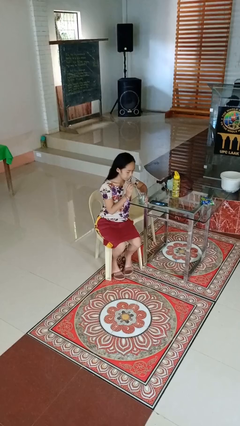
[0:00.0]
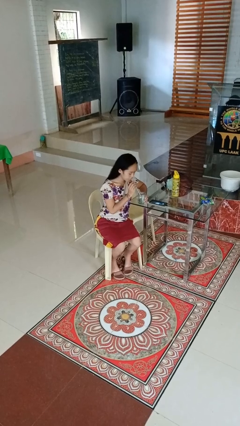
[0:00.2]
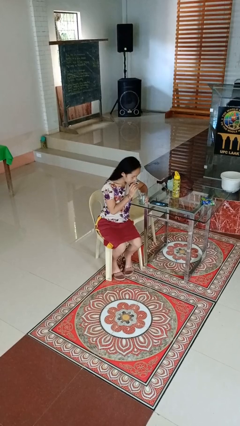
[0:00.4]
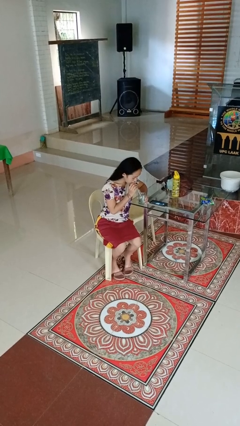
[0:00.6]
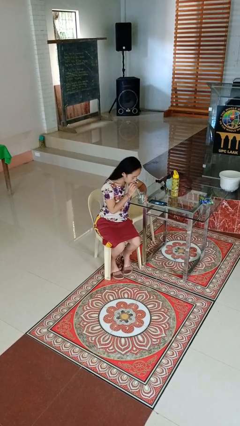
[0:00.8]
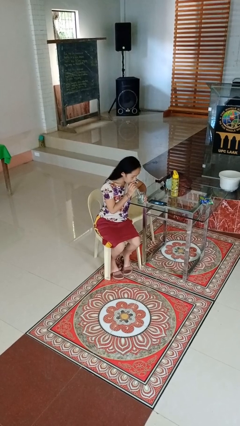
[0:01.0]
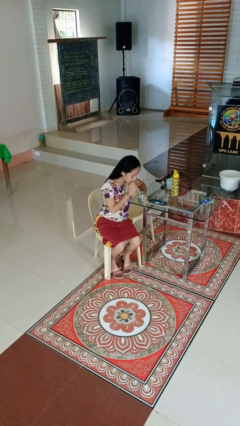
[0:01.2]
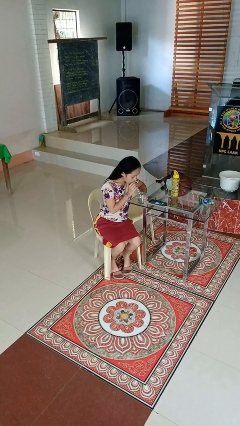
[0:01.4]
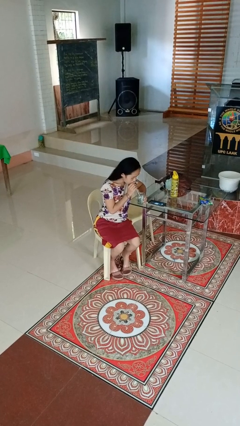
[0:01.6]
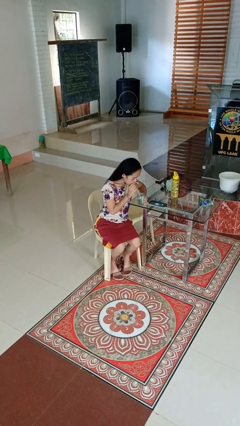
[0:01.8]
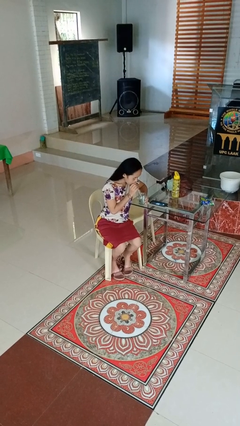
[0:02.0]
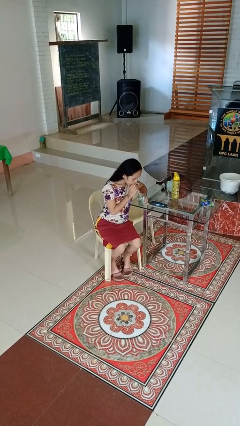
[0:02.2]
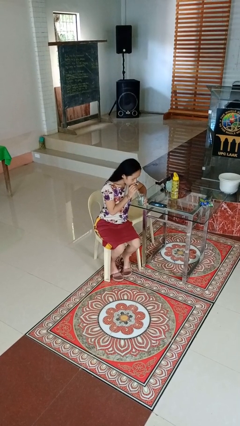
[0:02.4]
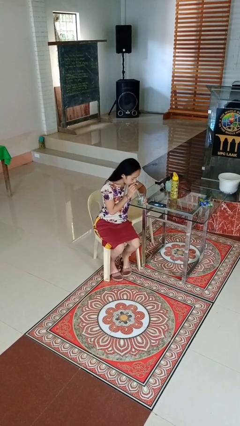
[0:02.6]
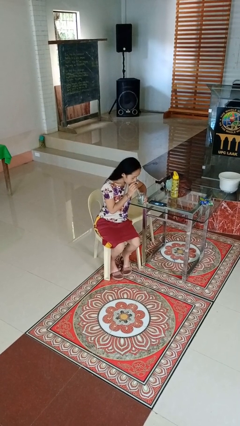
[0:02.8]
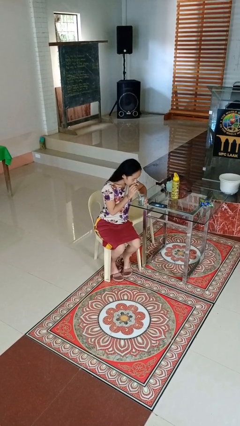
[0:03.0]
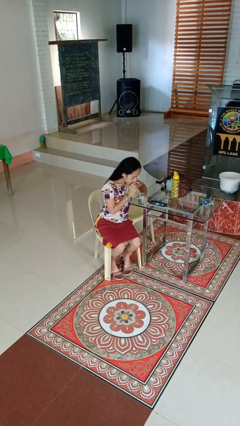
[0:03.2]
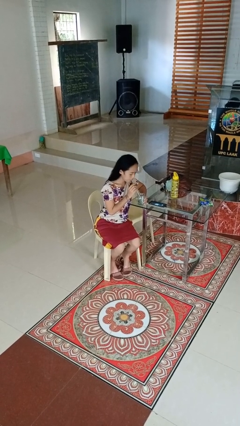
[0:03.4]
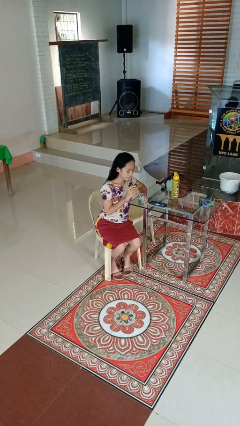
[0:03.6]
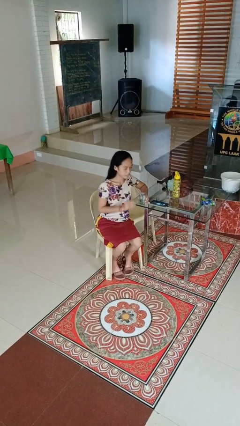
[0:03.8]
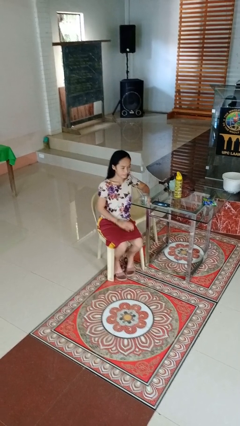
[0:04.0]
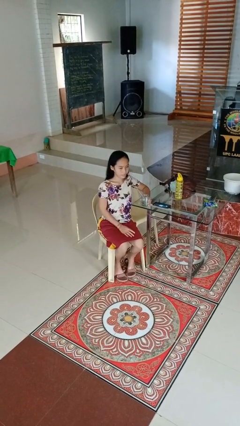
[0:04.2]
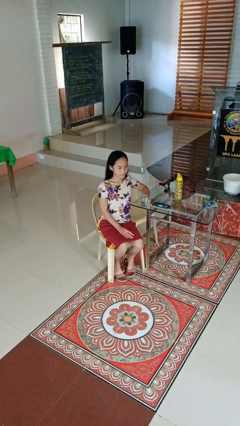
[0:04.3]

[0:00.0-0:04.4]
person drinks from straw

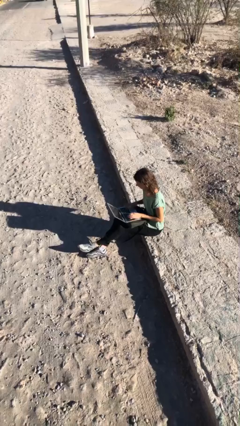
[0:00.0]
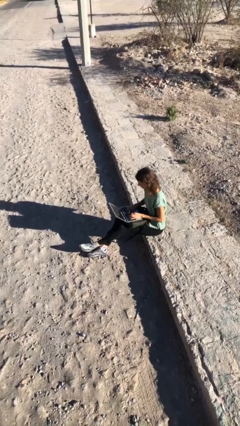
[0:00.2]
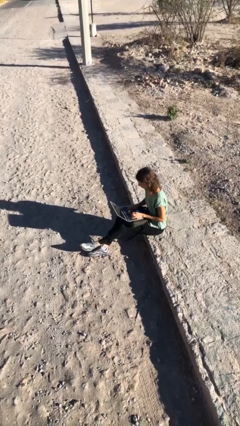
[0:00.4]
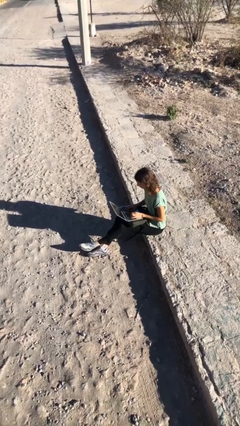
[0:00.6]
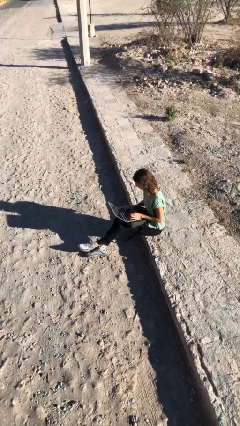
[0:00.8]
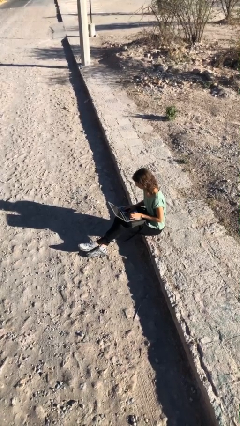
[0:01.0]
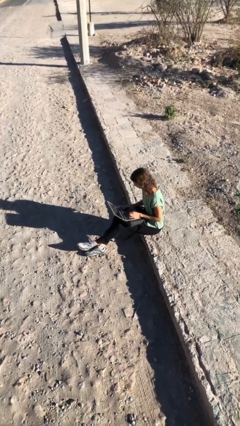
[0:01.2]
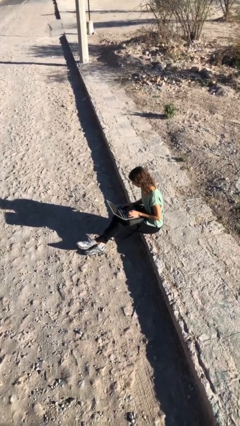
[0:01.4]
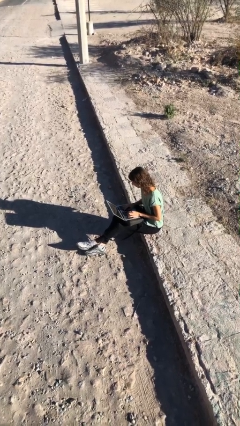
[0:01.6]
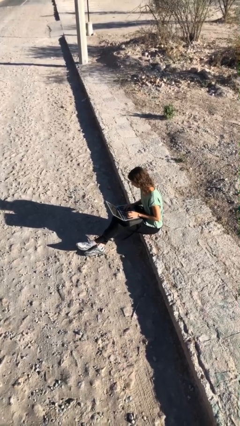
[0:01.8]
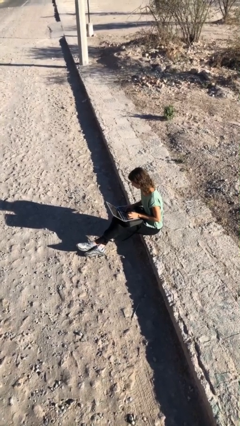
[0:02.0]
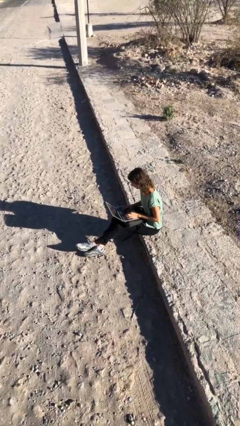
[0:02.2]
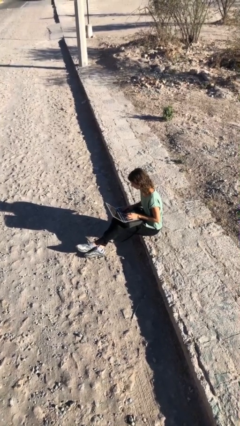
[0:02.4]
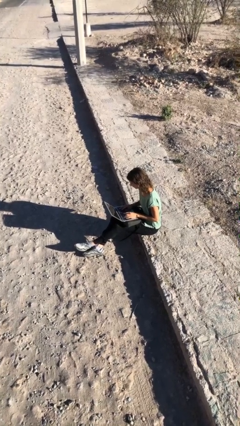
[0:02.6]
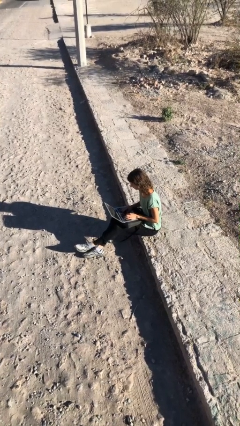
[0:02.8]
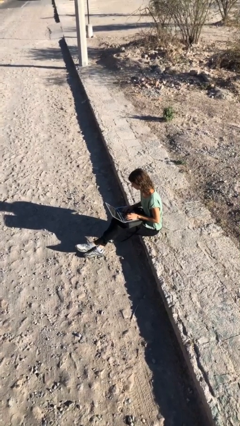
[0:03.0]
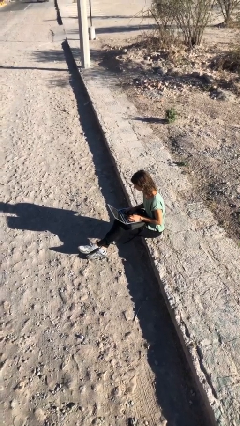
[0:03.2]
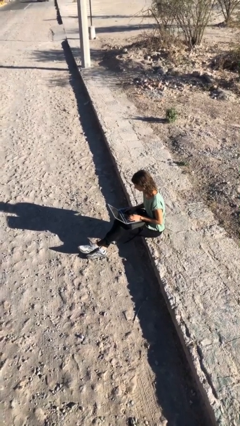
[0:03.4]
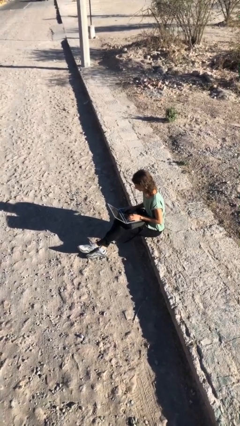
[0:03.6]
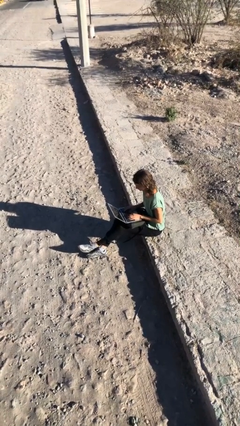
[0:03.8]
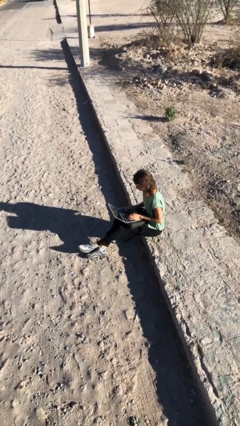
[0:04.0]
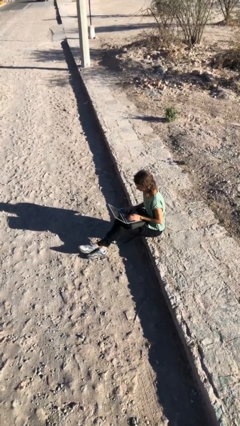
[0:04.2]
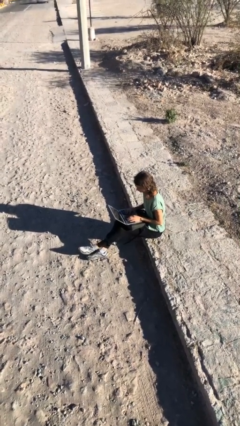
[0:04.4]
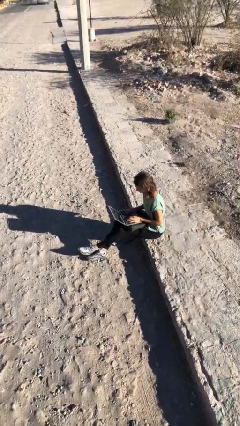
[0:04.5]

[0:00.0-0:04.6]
person interacts with laptop

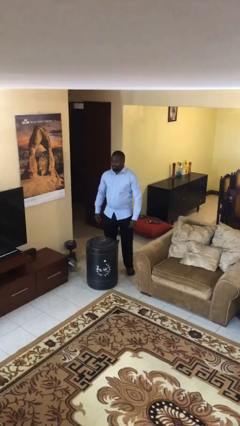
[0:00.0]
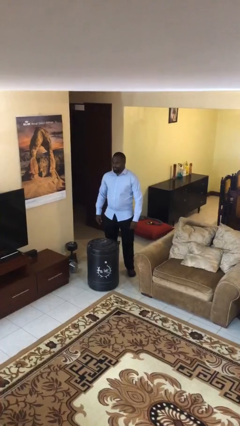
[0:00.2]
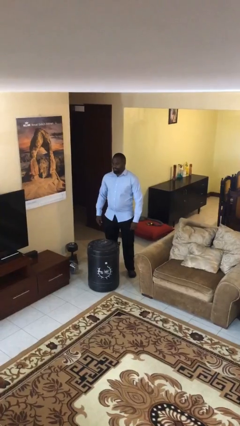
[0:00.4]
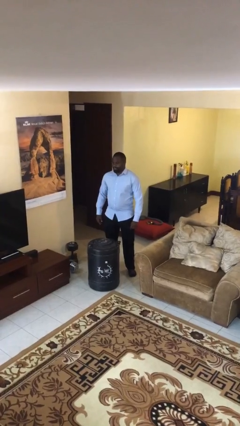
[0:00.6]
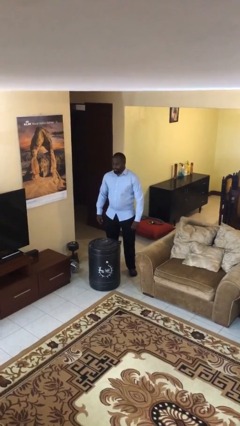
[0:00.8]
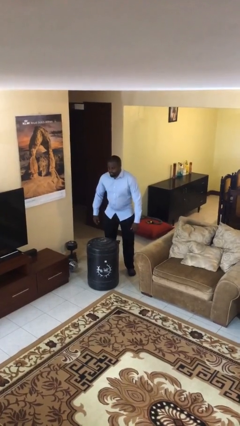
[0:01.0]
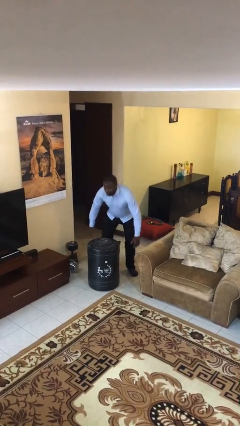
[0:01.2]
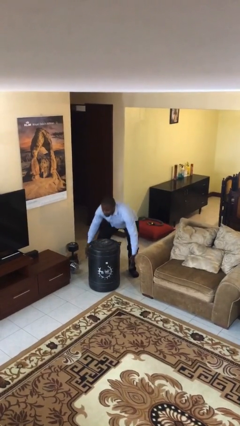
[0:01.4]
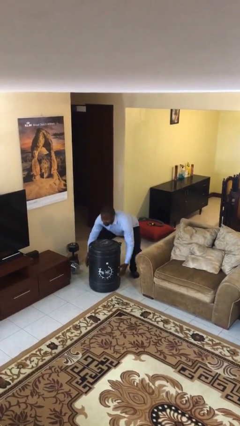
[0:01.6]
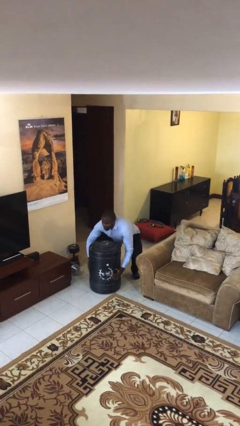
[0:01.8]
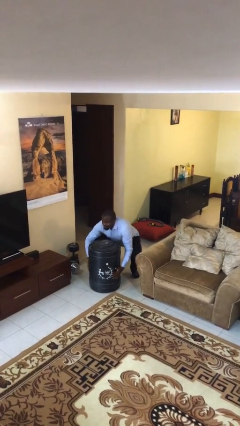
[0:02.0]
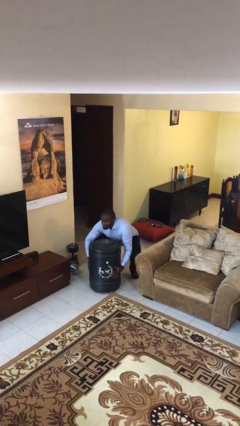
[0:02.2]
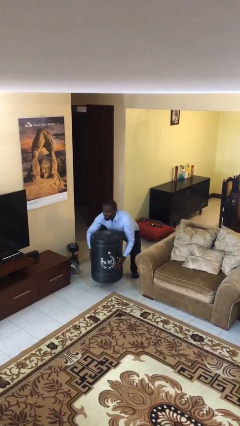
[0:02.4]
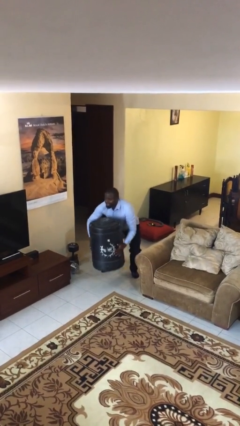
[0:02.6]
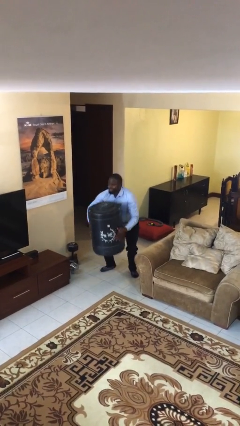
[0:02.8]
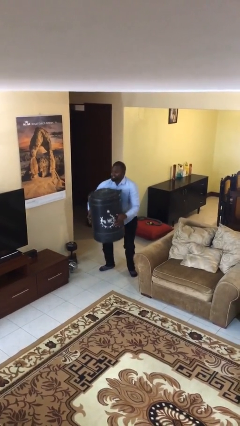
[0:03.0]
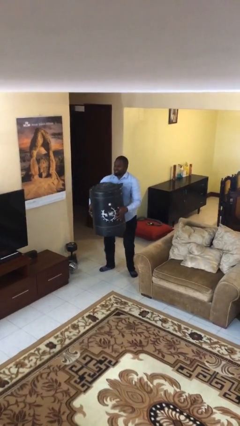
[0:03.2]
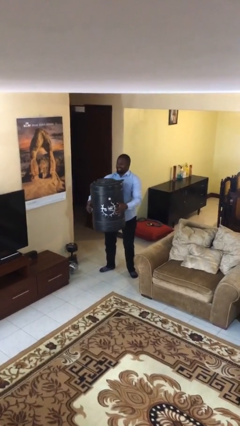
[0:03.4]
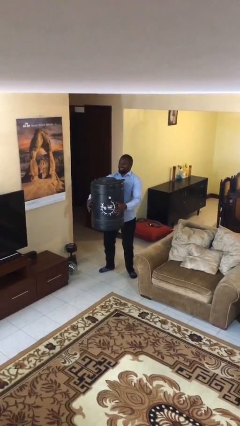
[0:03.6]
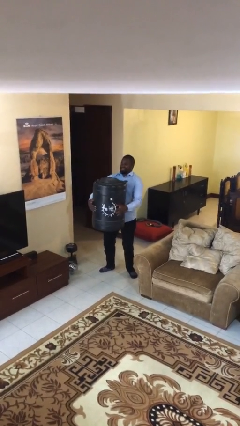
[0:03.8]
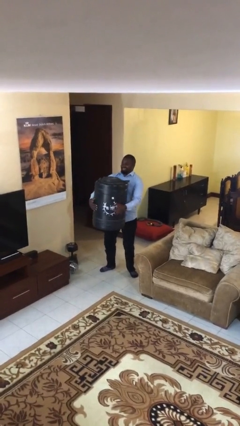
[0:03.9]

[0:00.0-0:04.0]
person picks up object from floor

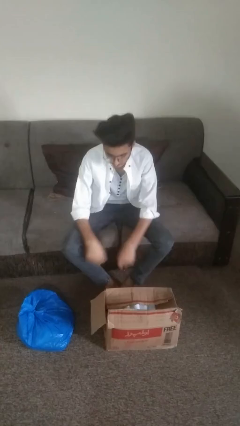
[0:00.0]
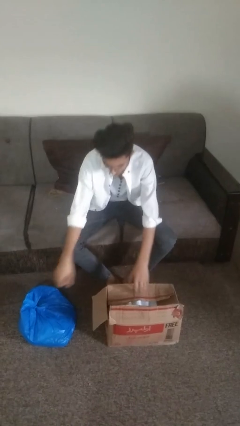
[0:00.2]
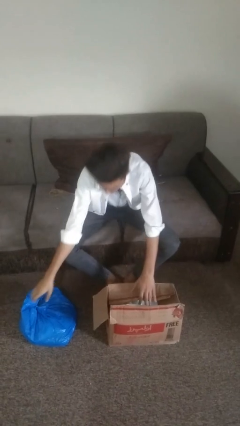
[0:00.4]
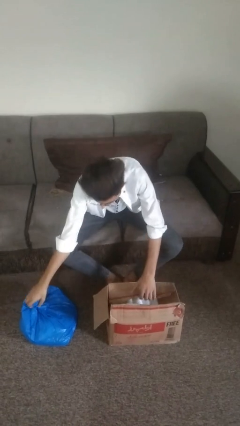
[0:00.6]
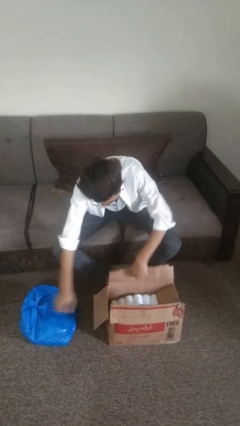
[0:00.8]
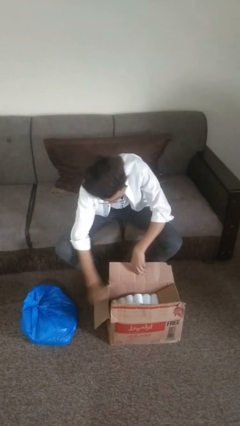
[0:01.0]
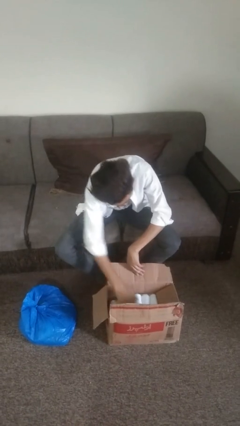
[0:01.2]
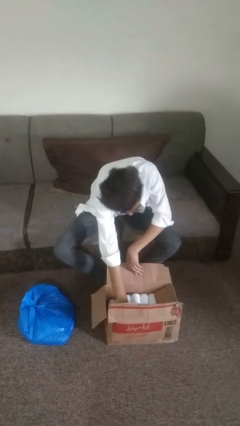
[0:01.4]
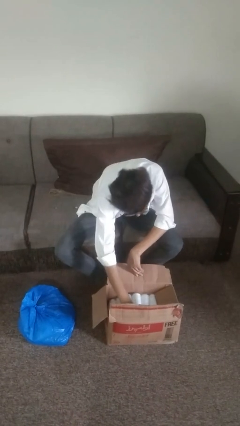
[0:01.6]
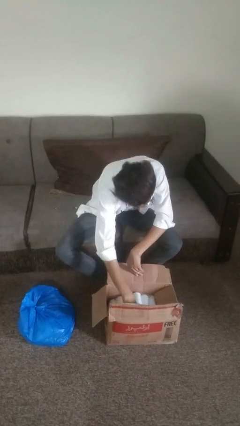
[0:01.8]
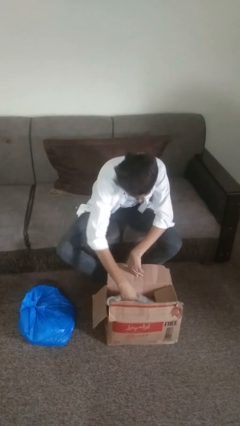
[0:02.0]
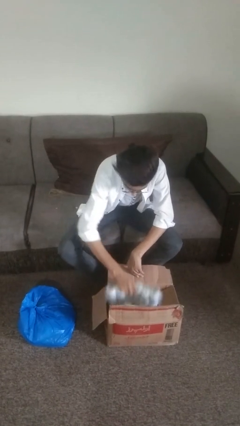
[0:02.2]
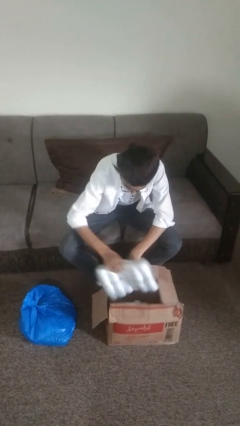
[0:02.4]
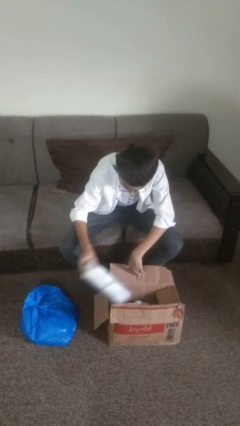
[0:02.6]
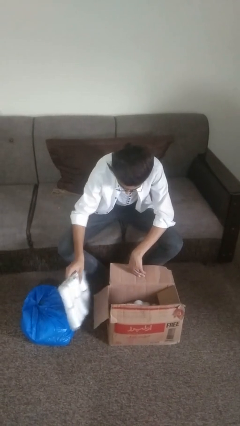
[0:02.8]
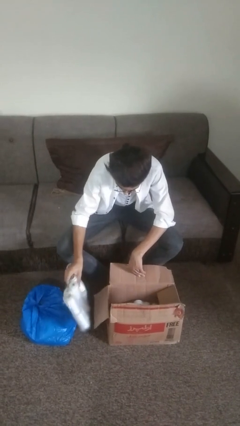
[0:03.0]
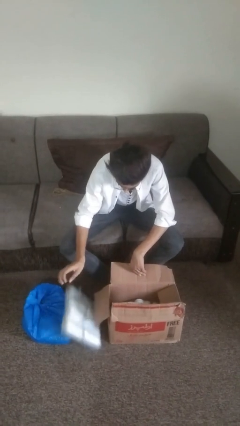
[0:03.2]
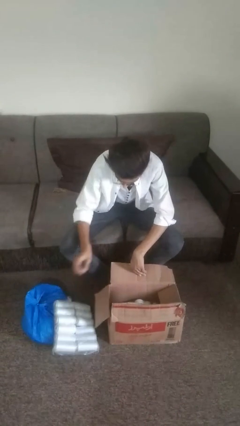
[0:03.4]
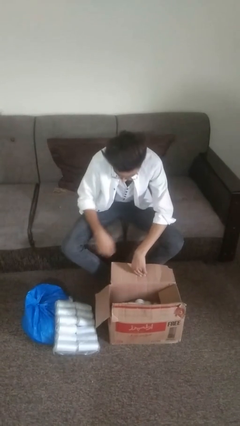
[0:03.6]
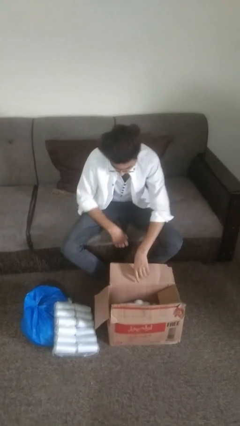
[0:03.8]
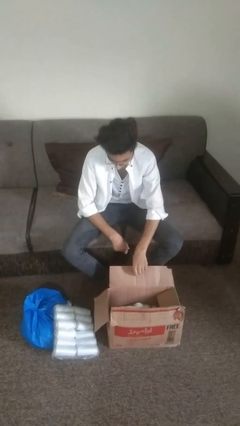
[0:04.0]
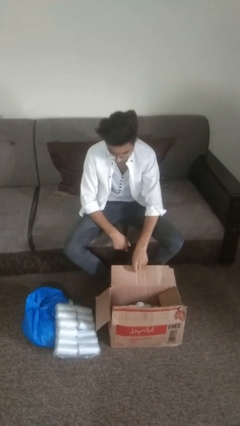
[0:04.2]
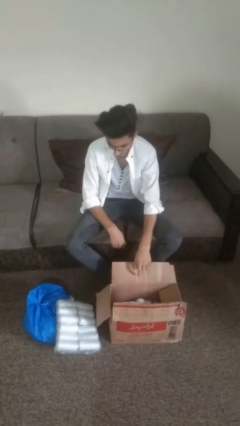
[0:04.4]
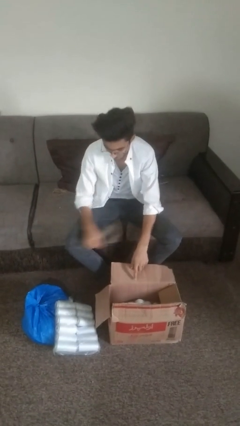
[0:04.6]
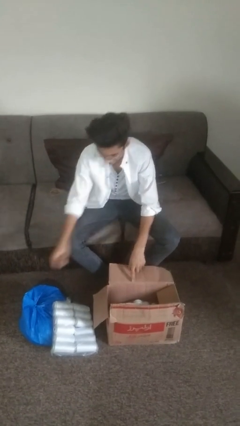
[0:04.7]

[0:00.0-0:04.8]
person takes object from box
